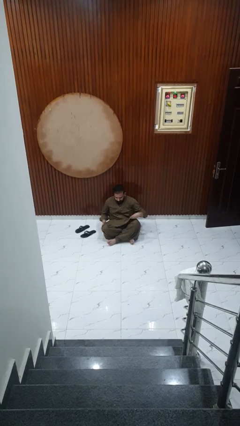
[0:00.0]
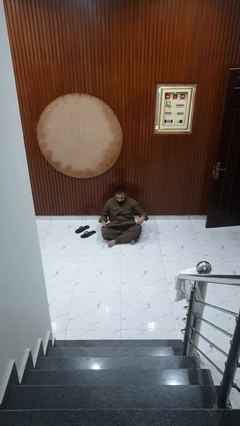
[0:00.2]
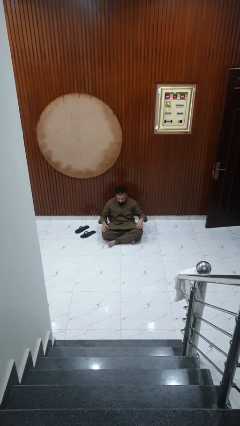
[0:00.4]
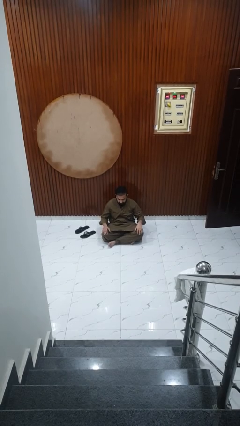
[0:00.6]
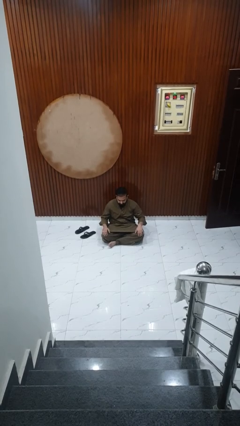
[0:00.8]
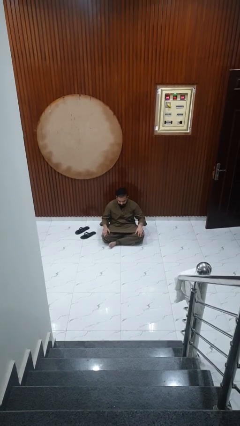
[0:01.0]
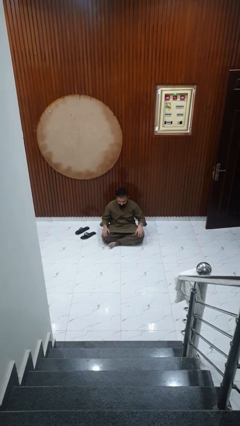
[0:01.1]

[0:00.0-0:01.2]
person sits crisscross

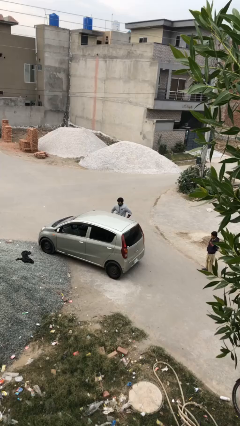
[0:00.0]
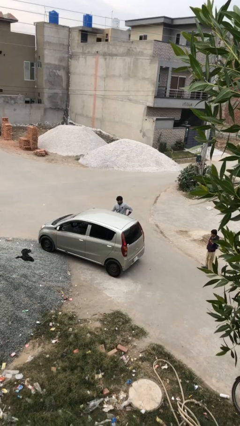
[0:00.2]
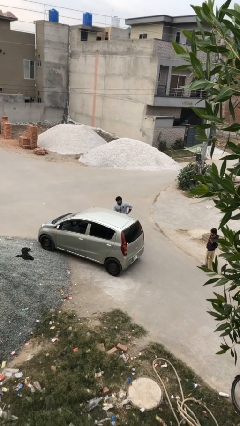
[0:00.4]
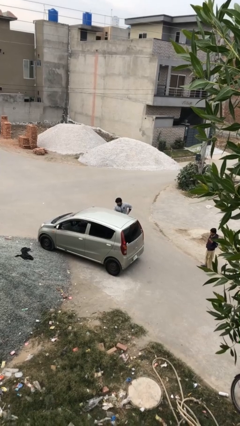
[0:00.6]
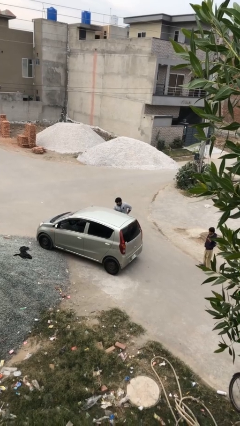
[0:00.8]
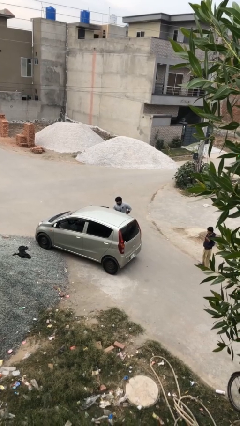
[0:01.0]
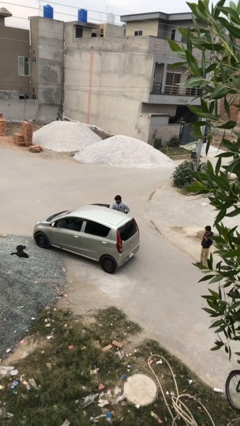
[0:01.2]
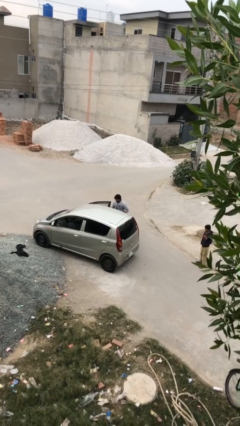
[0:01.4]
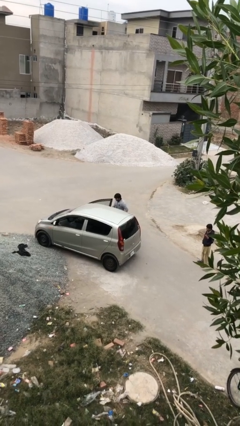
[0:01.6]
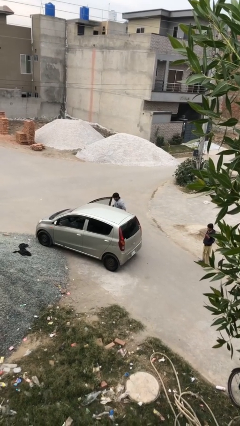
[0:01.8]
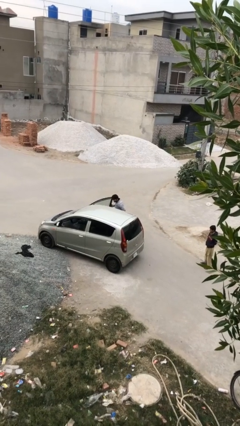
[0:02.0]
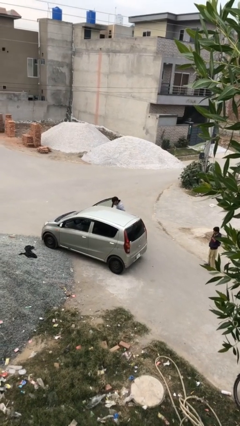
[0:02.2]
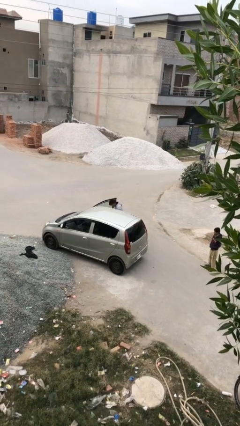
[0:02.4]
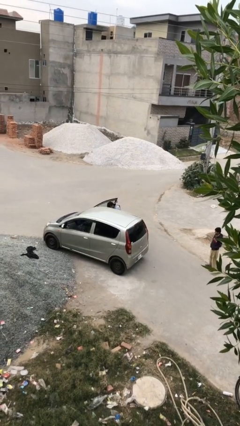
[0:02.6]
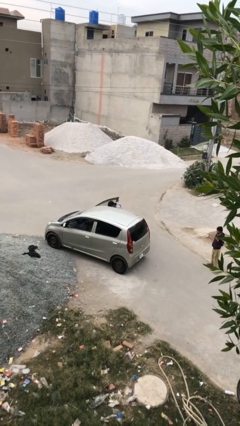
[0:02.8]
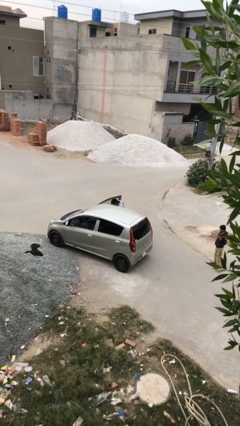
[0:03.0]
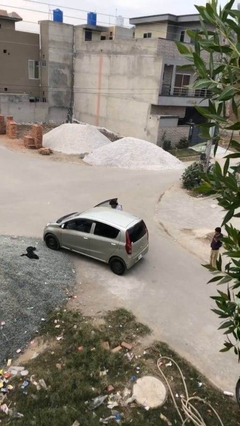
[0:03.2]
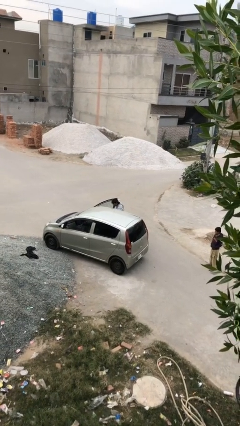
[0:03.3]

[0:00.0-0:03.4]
person opens car door

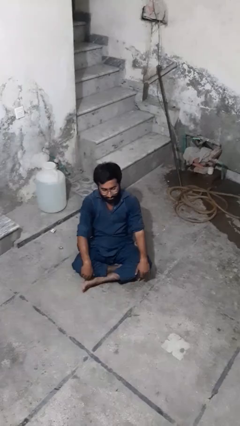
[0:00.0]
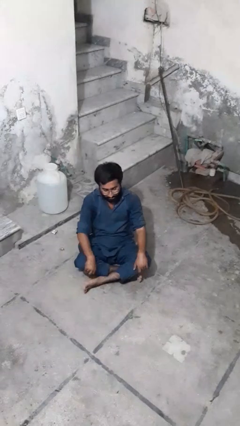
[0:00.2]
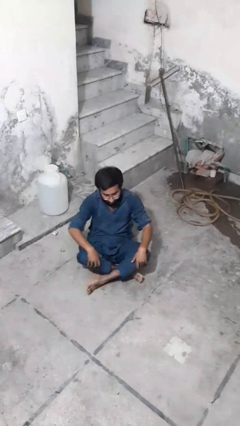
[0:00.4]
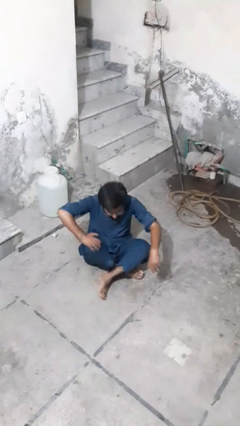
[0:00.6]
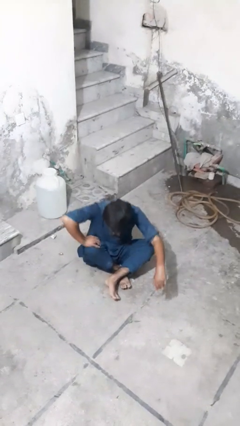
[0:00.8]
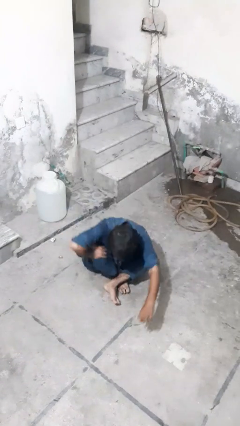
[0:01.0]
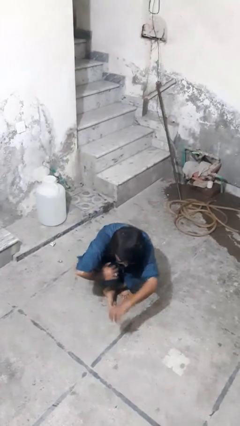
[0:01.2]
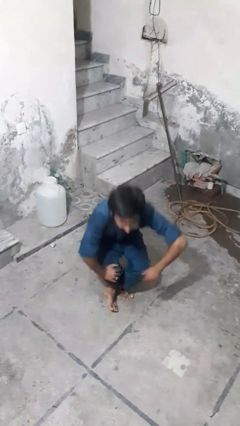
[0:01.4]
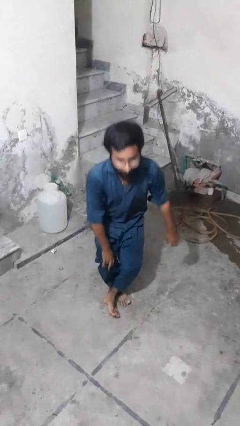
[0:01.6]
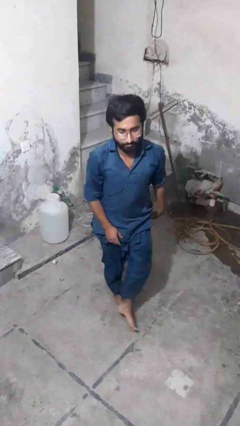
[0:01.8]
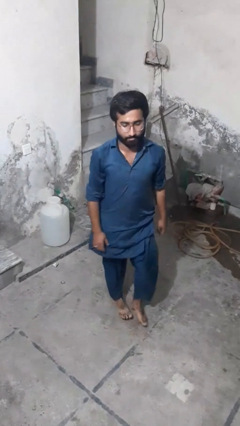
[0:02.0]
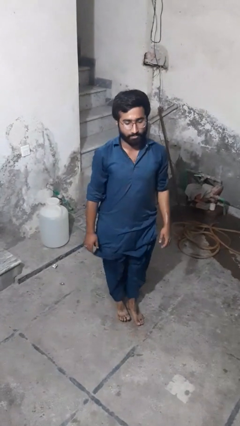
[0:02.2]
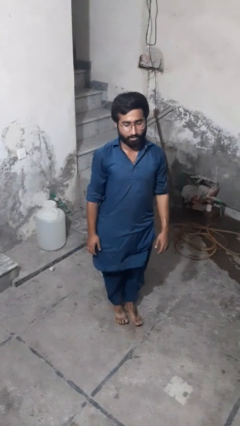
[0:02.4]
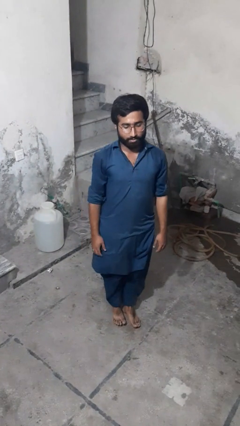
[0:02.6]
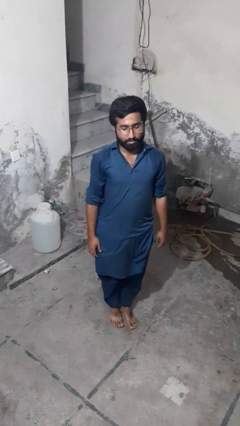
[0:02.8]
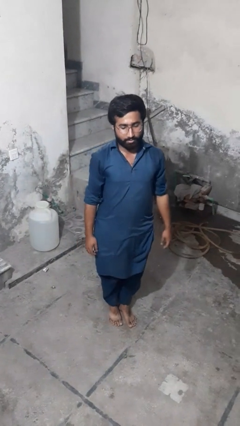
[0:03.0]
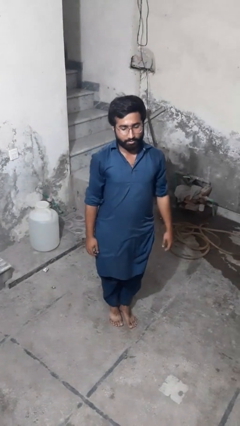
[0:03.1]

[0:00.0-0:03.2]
person stands up from floor

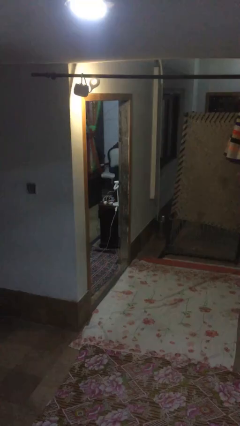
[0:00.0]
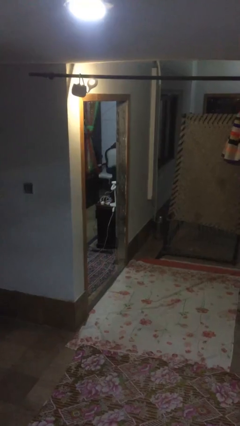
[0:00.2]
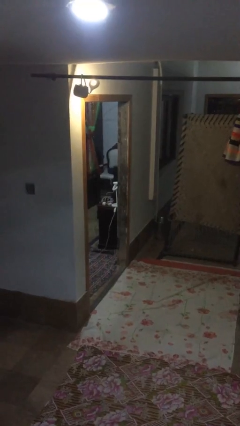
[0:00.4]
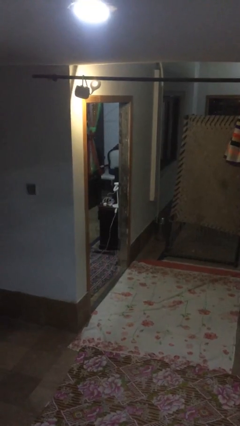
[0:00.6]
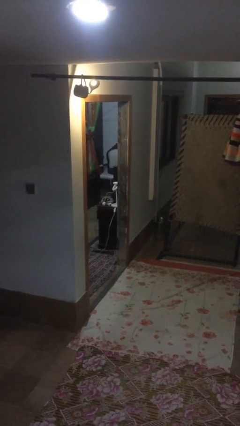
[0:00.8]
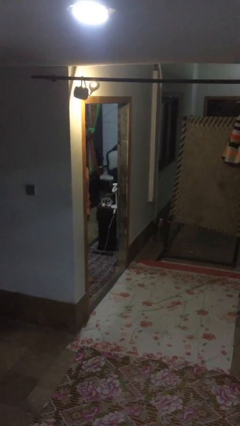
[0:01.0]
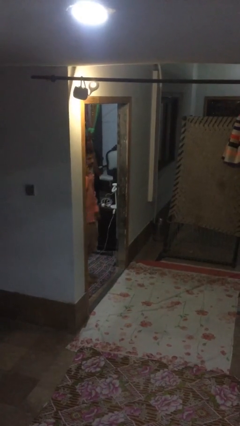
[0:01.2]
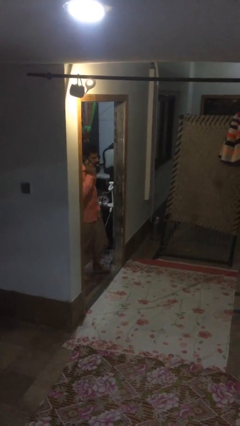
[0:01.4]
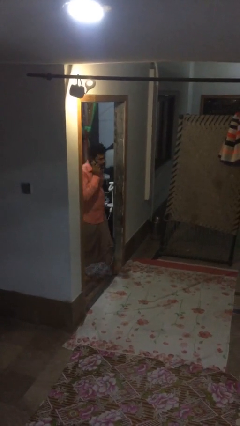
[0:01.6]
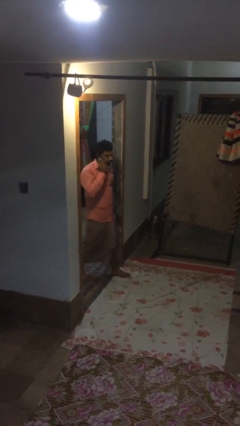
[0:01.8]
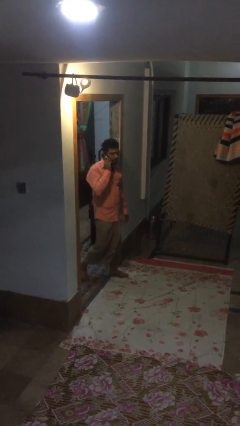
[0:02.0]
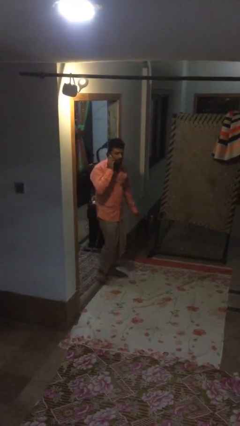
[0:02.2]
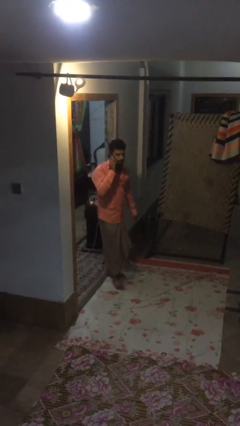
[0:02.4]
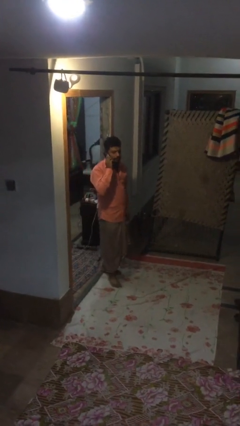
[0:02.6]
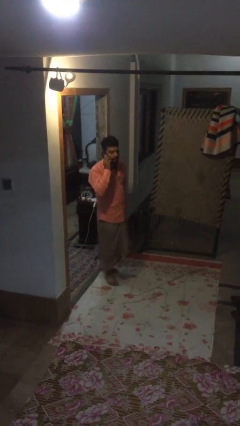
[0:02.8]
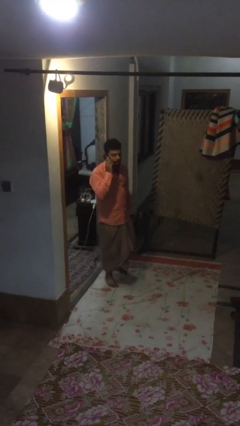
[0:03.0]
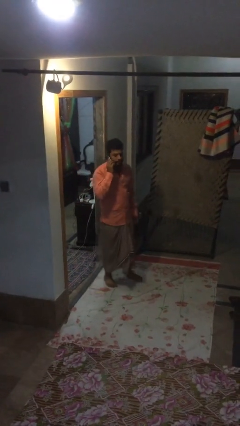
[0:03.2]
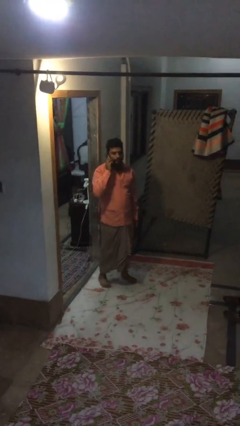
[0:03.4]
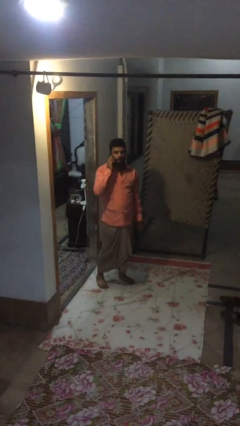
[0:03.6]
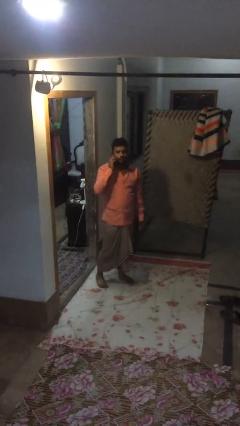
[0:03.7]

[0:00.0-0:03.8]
person enters scene through structure

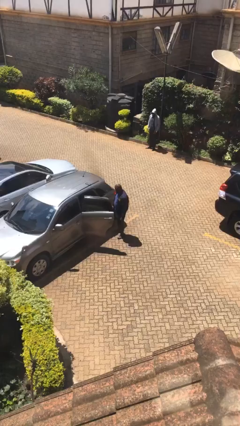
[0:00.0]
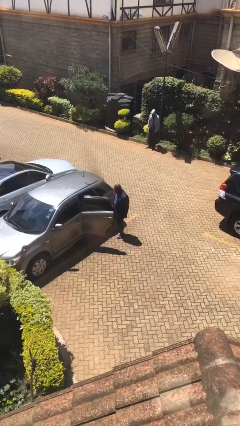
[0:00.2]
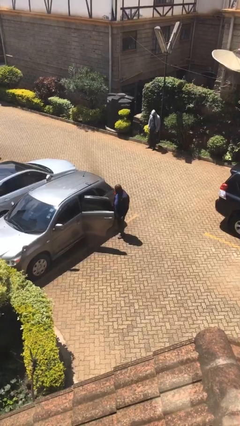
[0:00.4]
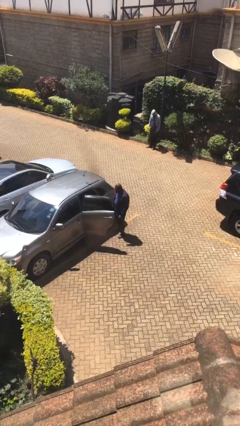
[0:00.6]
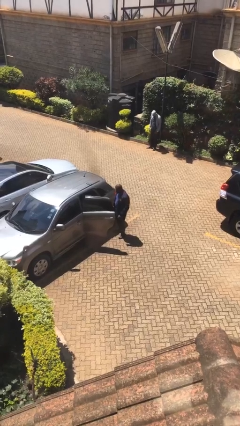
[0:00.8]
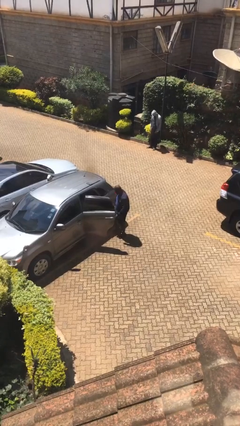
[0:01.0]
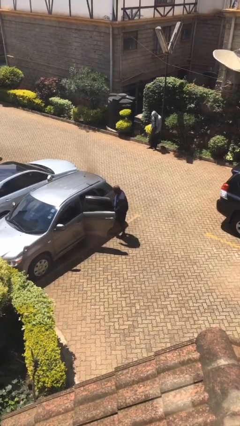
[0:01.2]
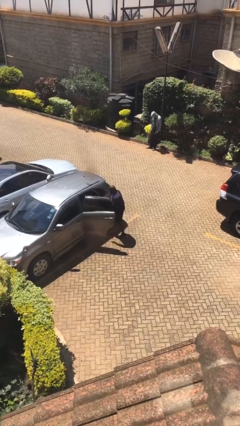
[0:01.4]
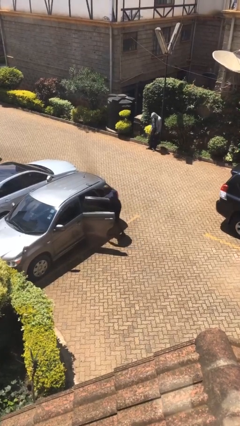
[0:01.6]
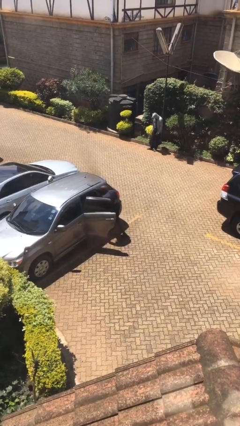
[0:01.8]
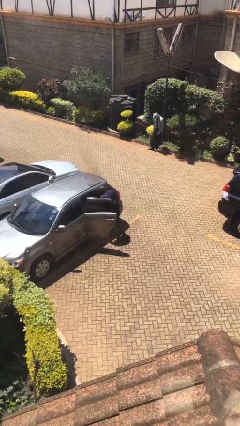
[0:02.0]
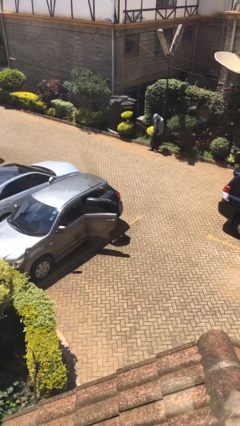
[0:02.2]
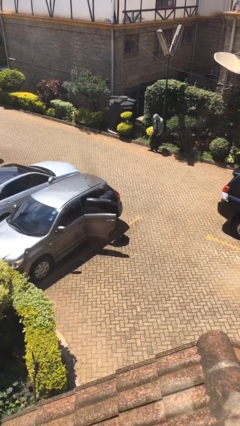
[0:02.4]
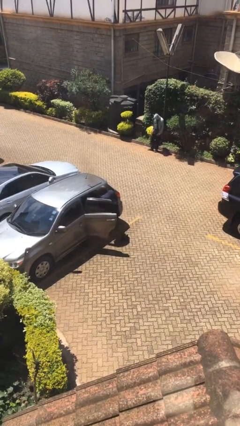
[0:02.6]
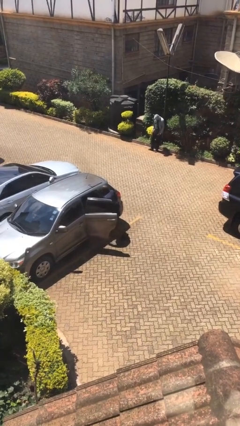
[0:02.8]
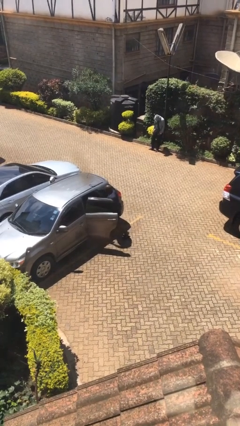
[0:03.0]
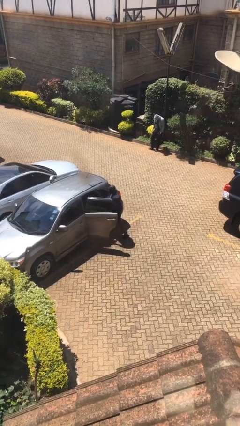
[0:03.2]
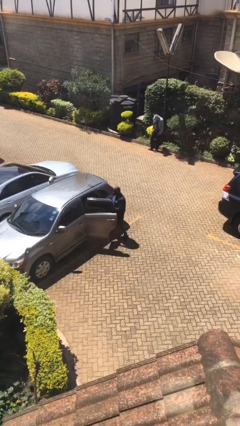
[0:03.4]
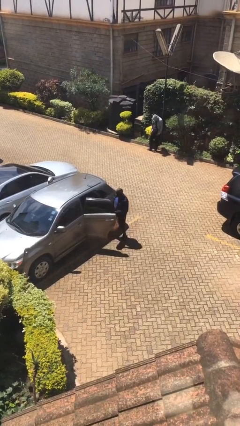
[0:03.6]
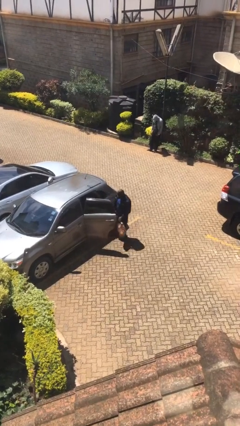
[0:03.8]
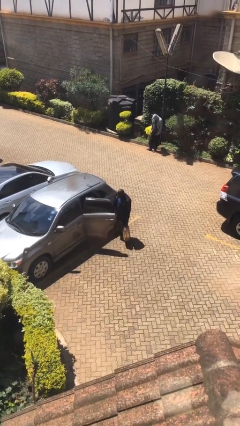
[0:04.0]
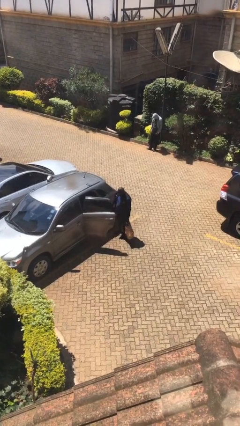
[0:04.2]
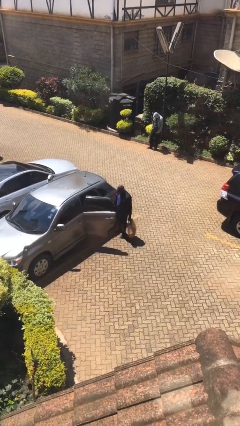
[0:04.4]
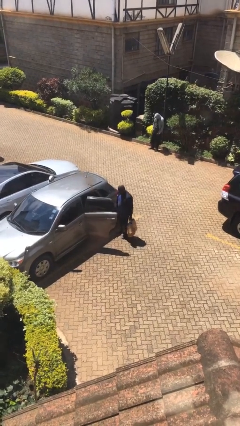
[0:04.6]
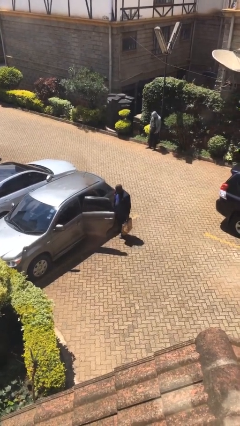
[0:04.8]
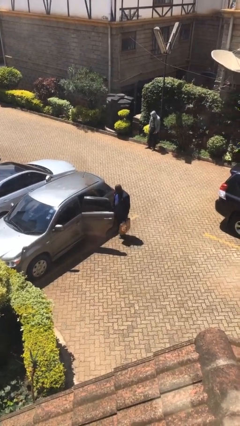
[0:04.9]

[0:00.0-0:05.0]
person unloads car

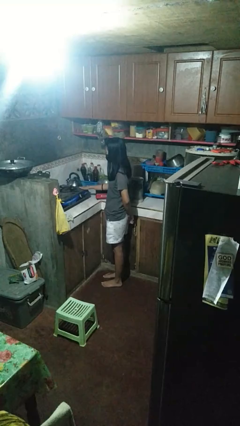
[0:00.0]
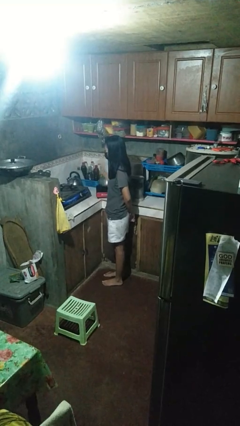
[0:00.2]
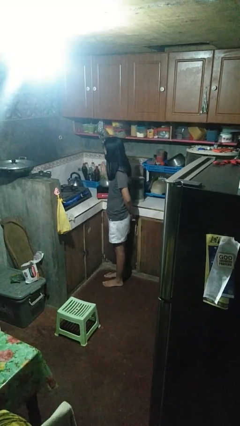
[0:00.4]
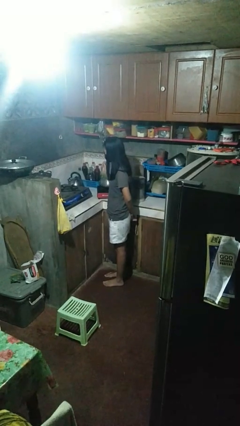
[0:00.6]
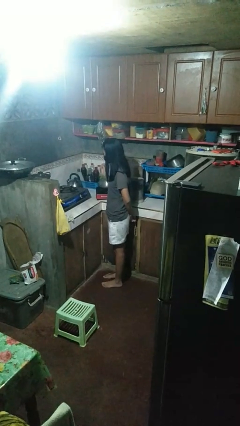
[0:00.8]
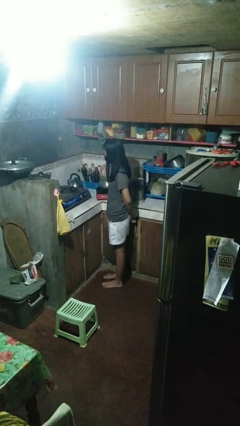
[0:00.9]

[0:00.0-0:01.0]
person burns hand
